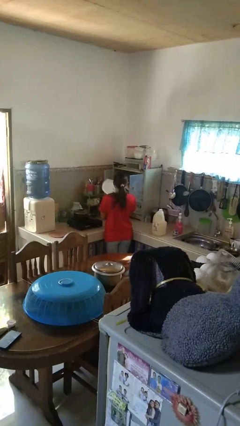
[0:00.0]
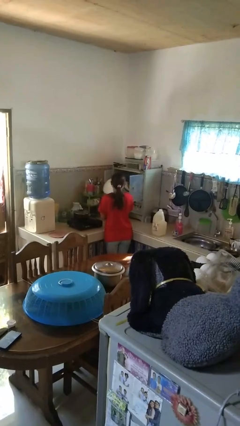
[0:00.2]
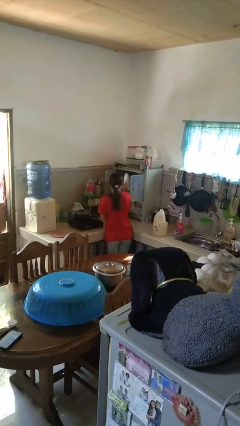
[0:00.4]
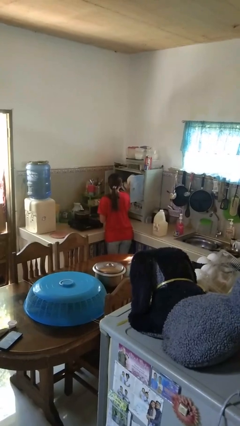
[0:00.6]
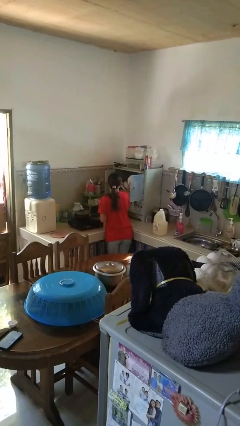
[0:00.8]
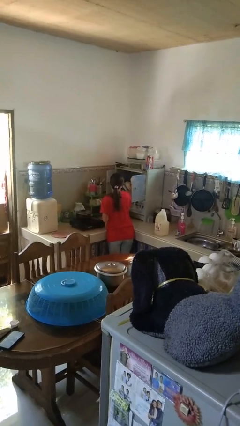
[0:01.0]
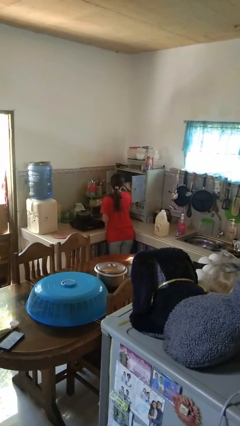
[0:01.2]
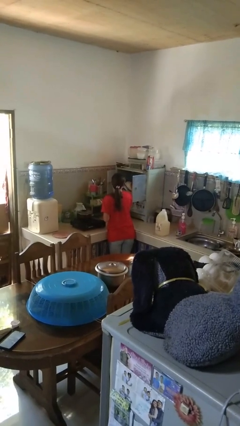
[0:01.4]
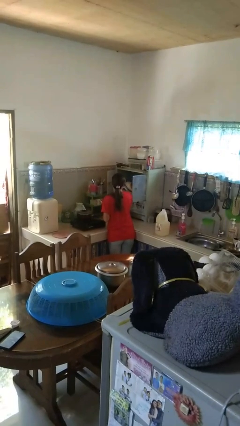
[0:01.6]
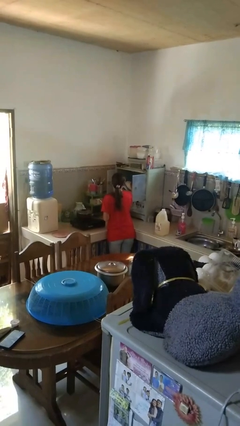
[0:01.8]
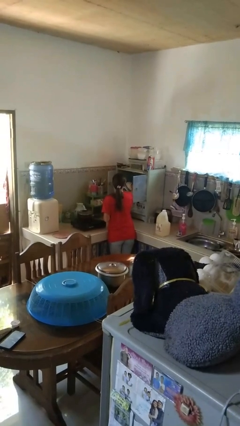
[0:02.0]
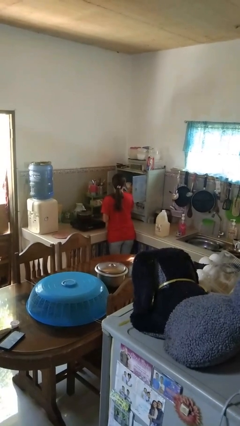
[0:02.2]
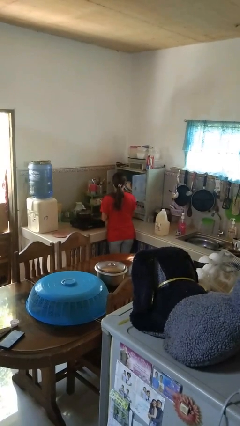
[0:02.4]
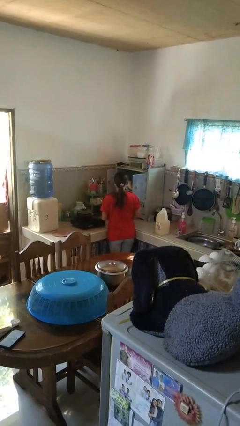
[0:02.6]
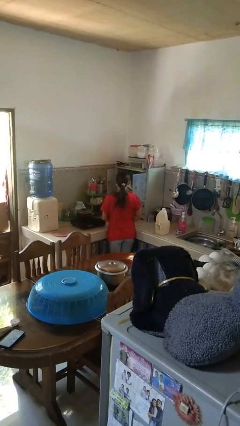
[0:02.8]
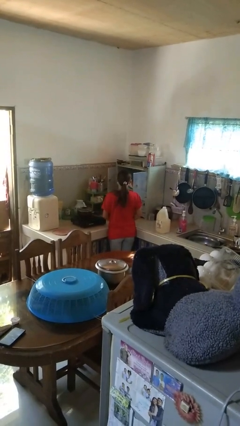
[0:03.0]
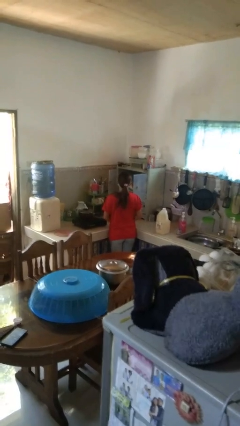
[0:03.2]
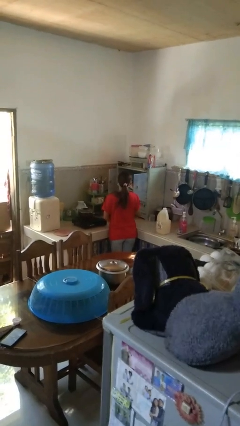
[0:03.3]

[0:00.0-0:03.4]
person puts object in cabinet

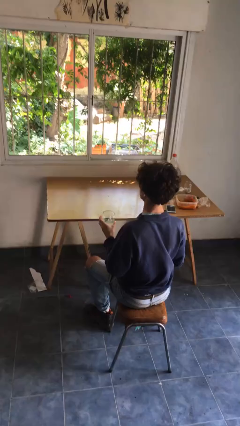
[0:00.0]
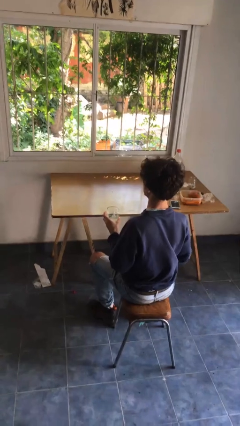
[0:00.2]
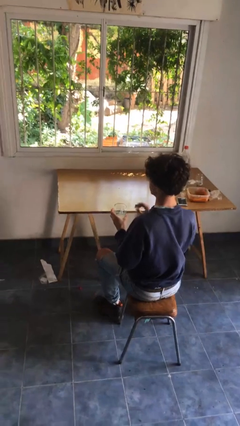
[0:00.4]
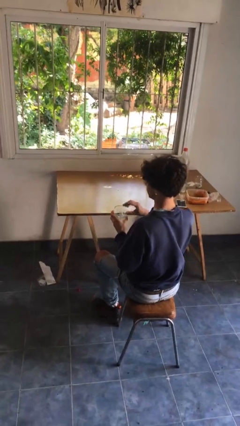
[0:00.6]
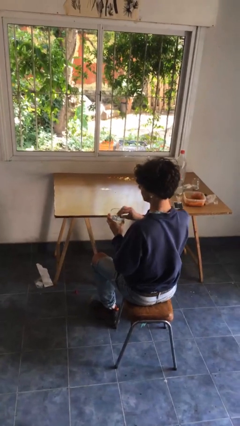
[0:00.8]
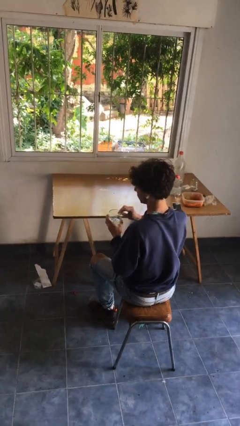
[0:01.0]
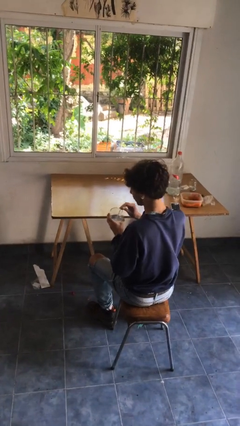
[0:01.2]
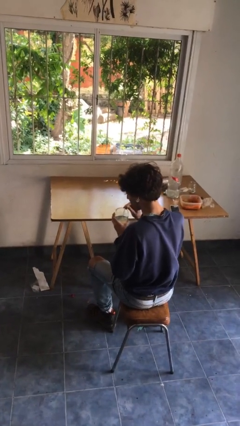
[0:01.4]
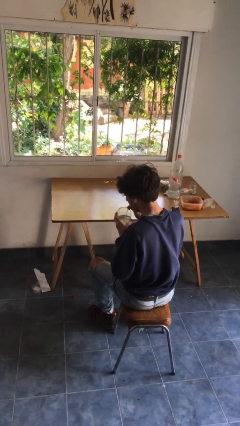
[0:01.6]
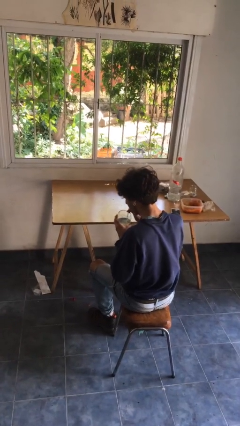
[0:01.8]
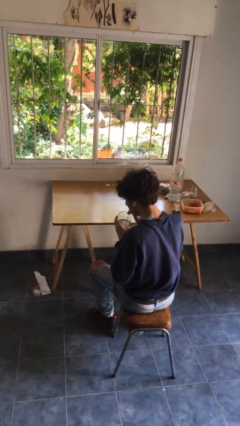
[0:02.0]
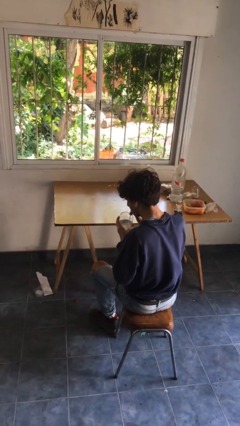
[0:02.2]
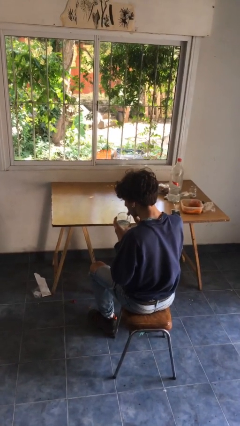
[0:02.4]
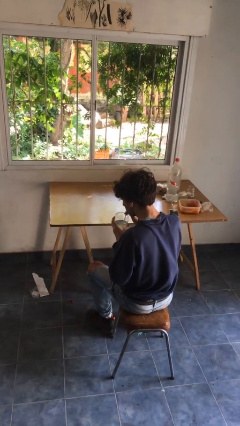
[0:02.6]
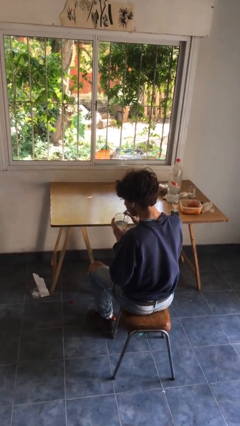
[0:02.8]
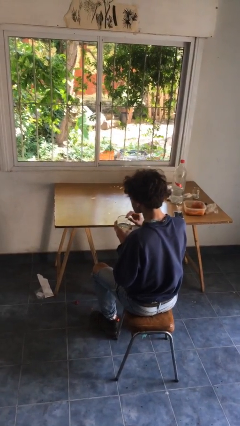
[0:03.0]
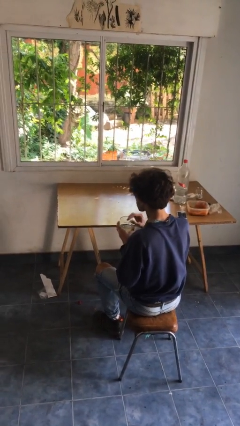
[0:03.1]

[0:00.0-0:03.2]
person drinks from straw

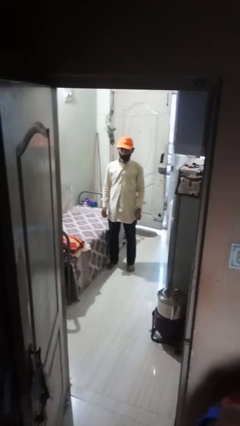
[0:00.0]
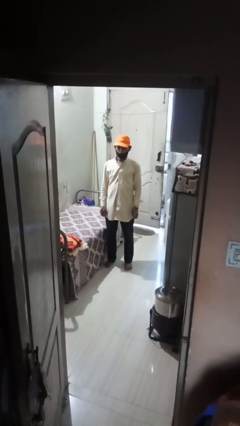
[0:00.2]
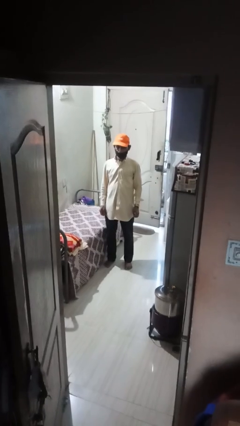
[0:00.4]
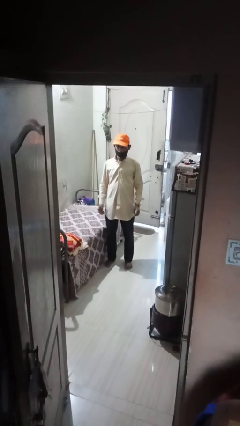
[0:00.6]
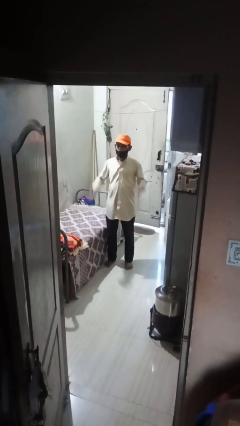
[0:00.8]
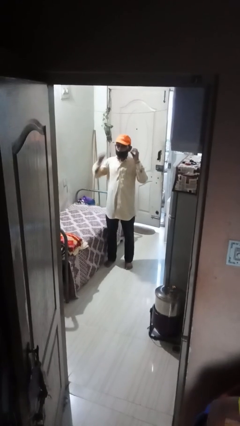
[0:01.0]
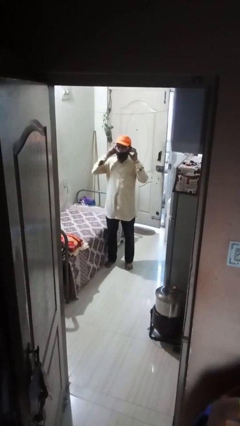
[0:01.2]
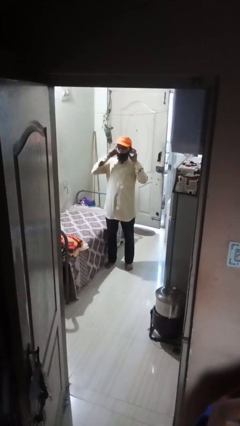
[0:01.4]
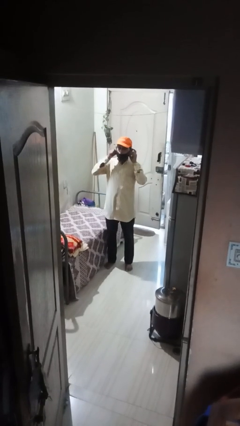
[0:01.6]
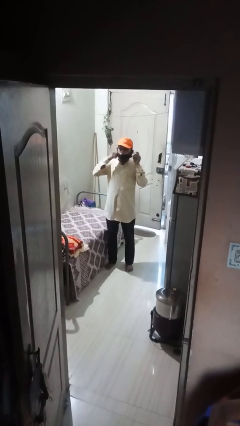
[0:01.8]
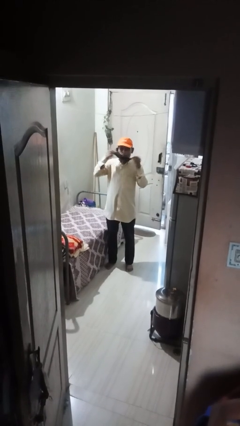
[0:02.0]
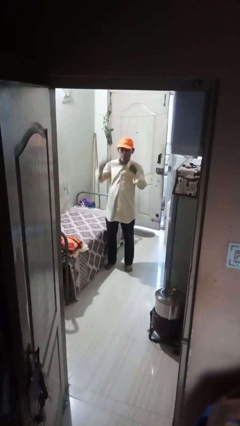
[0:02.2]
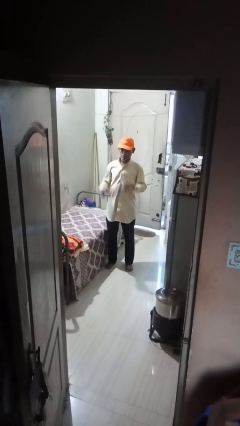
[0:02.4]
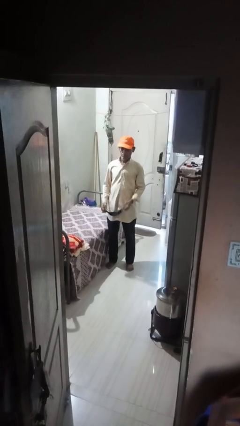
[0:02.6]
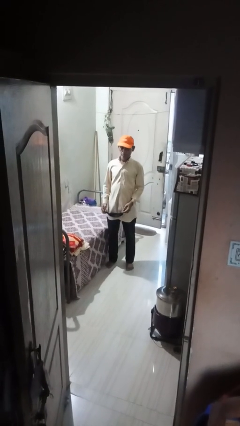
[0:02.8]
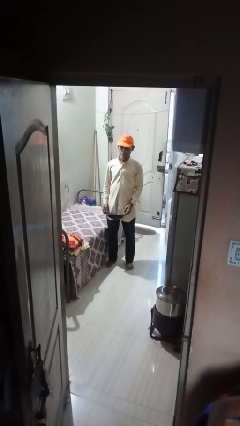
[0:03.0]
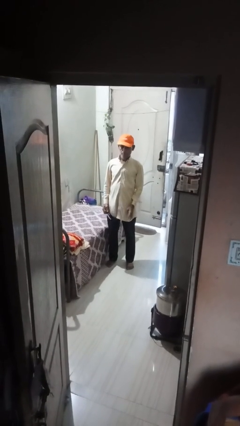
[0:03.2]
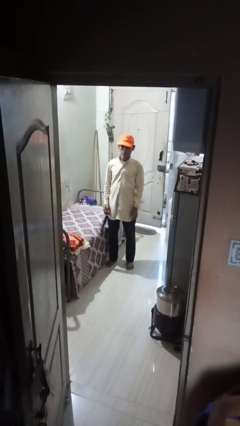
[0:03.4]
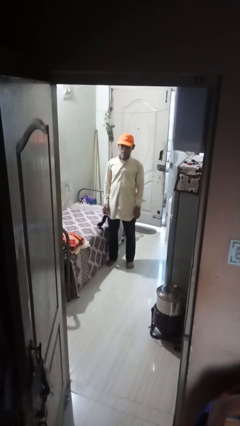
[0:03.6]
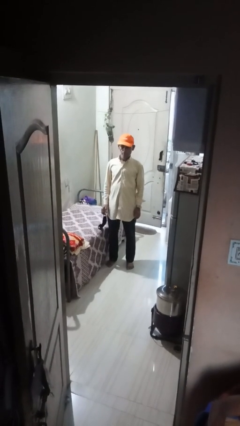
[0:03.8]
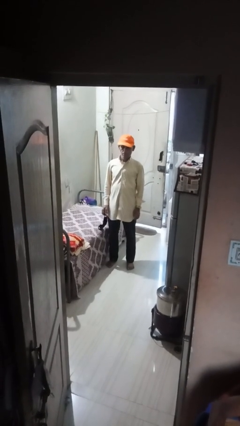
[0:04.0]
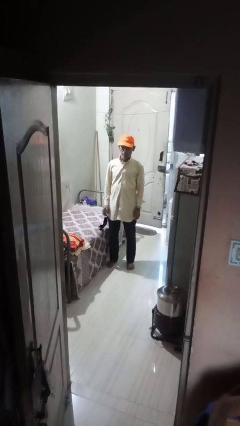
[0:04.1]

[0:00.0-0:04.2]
person takes off facemask

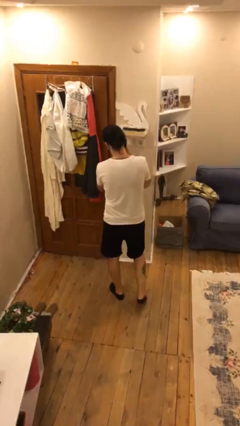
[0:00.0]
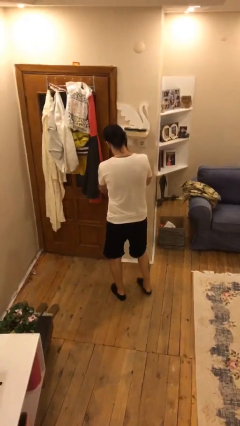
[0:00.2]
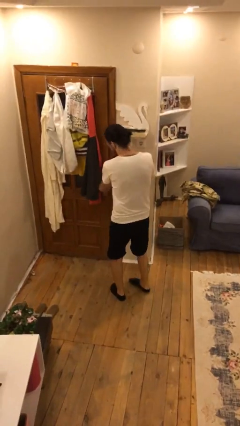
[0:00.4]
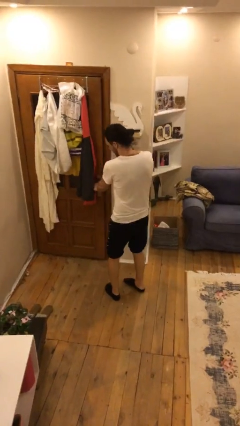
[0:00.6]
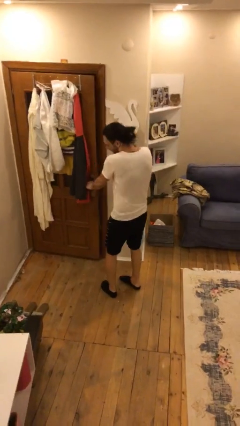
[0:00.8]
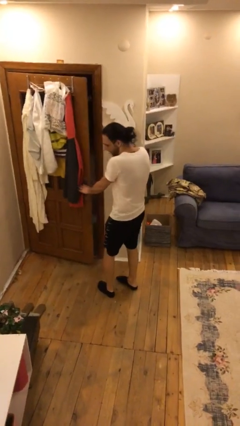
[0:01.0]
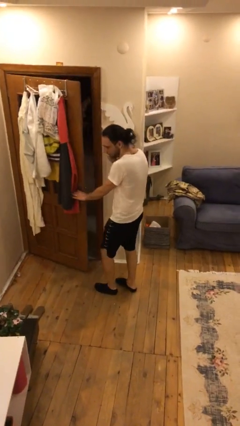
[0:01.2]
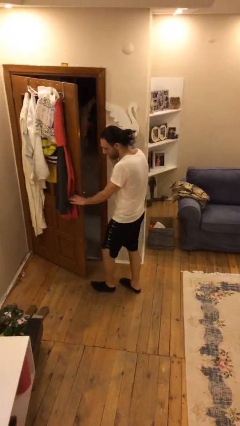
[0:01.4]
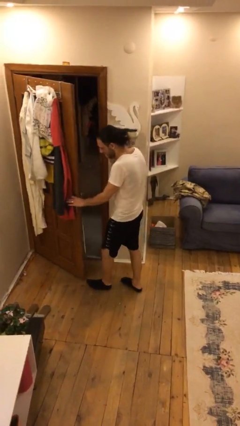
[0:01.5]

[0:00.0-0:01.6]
person opens facility door

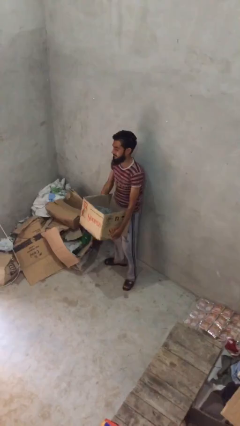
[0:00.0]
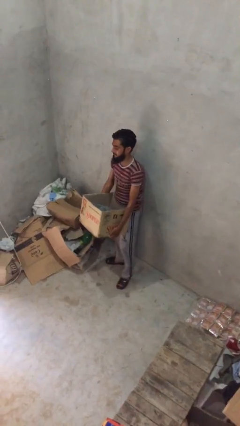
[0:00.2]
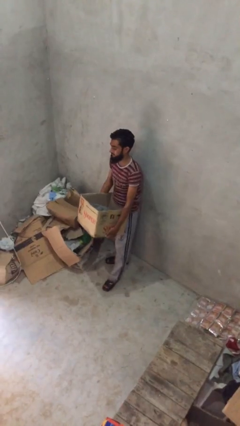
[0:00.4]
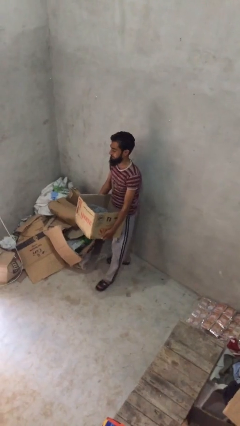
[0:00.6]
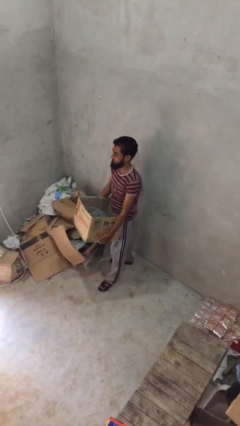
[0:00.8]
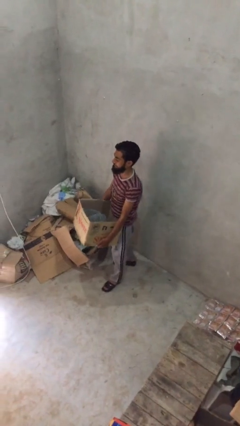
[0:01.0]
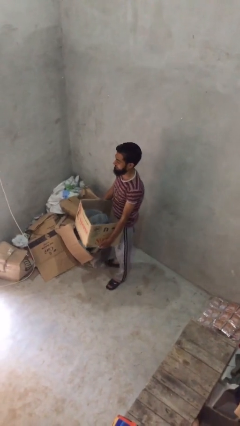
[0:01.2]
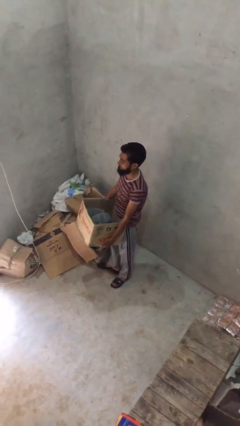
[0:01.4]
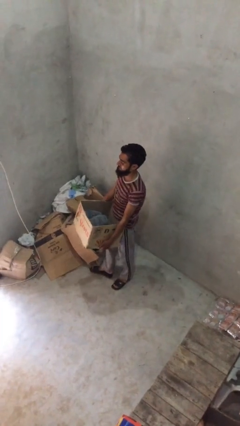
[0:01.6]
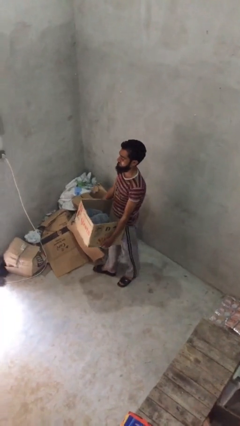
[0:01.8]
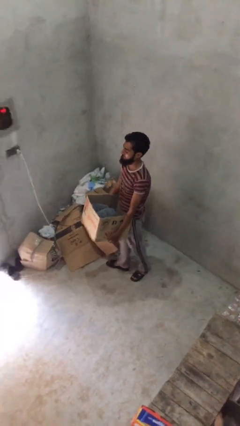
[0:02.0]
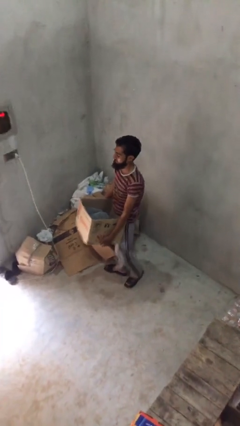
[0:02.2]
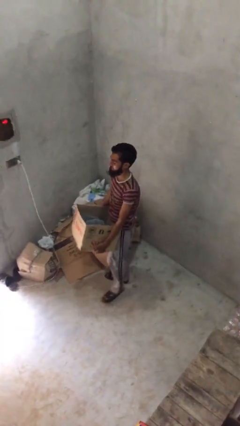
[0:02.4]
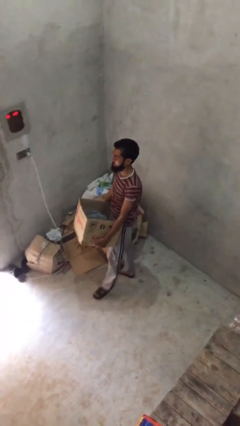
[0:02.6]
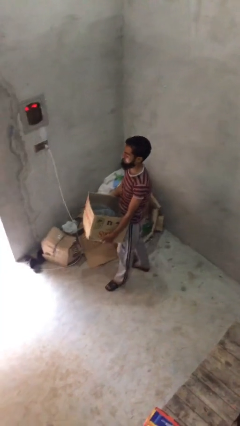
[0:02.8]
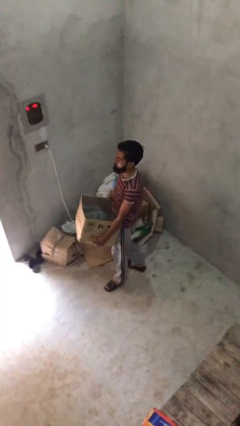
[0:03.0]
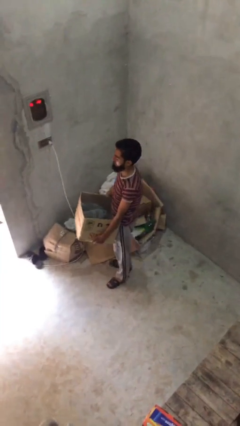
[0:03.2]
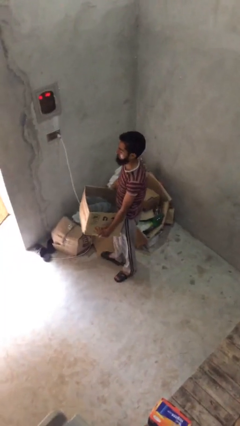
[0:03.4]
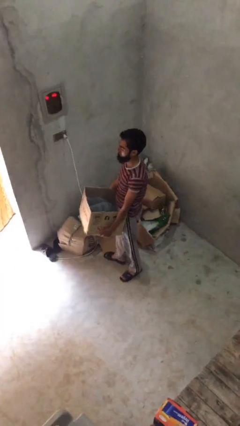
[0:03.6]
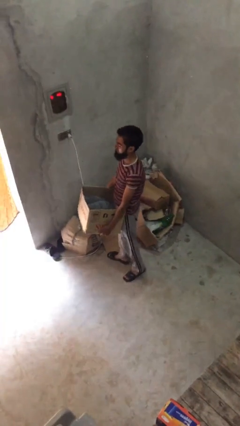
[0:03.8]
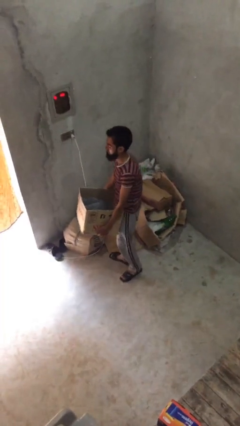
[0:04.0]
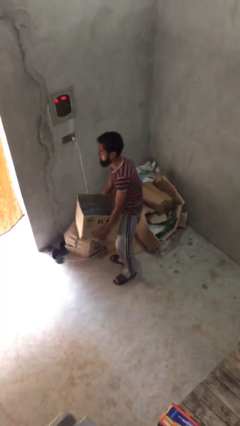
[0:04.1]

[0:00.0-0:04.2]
person carries heavy object

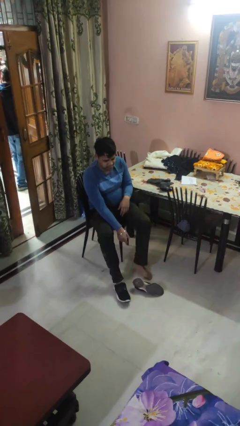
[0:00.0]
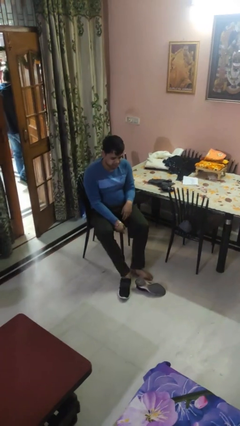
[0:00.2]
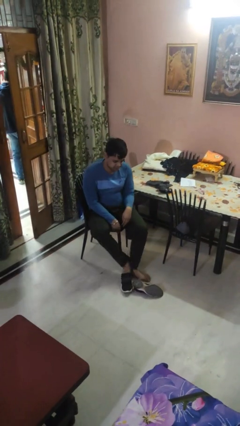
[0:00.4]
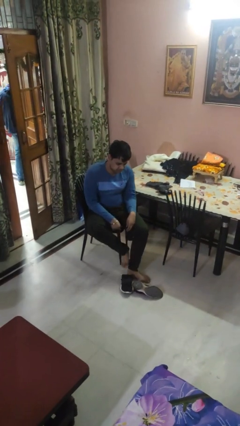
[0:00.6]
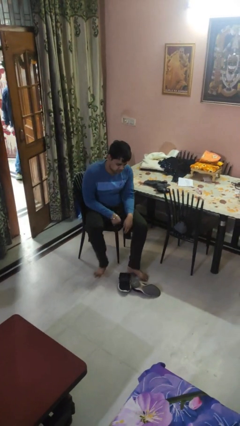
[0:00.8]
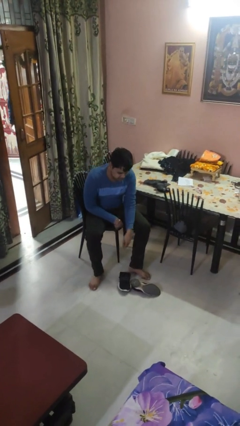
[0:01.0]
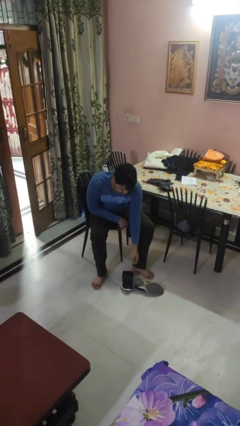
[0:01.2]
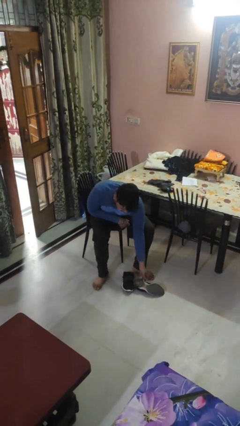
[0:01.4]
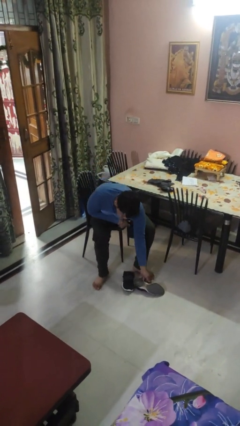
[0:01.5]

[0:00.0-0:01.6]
person takes off shoes
